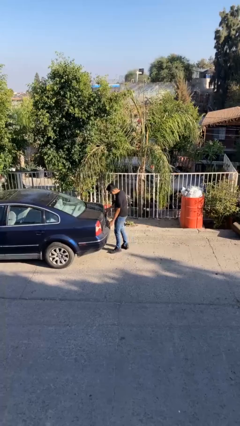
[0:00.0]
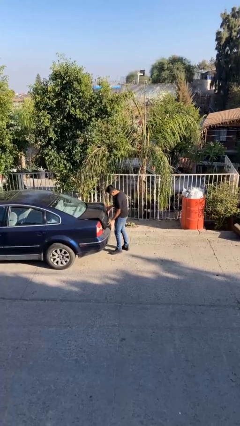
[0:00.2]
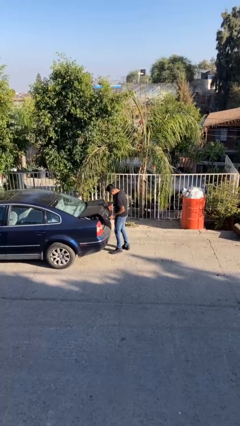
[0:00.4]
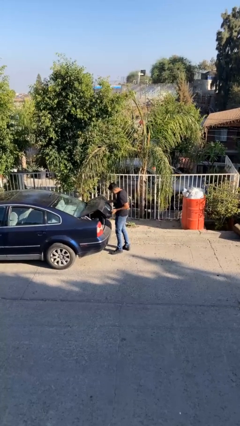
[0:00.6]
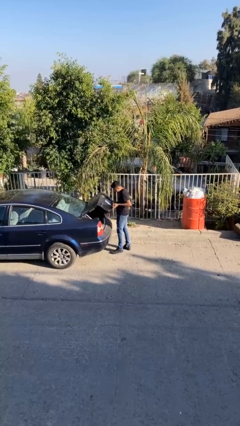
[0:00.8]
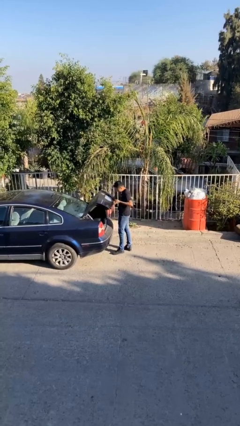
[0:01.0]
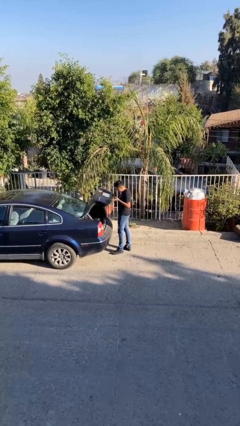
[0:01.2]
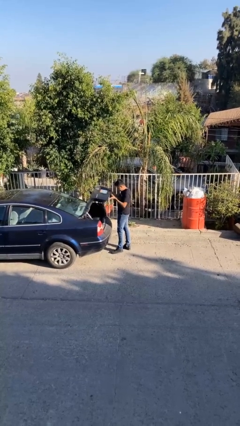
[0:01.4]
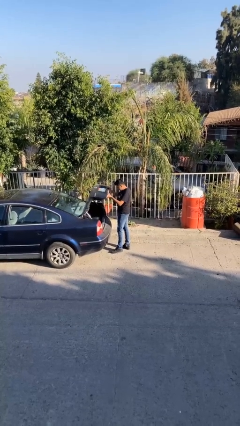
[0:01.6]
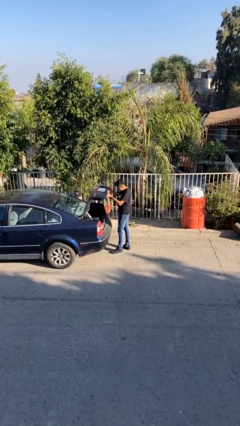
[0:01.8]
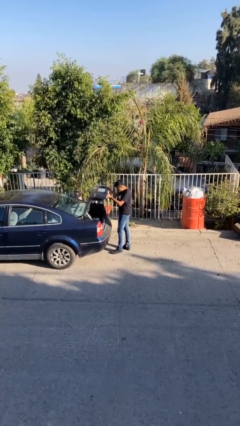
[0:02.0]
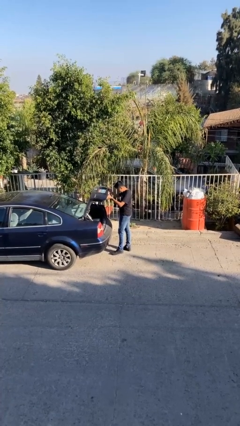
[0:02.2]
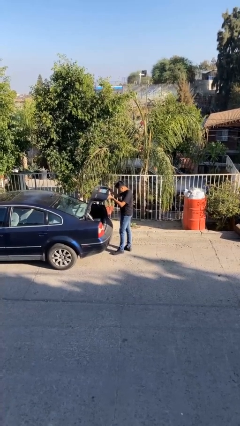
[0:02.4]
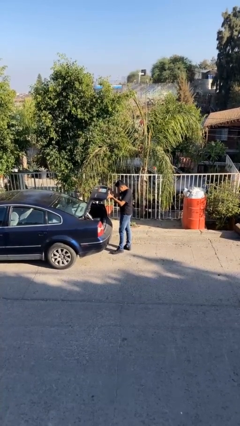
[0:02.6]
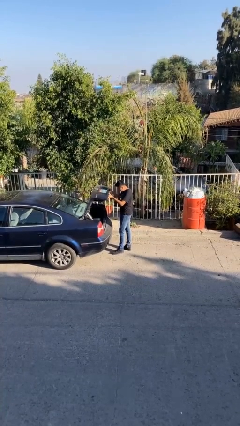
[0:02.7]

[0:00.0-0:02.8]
person opens car trunk

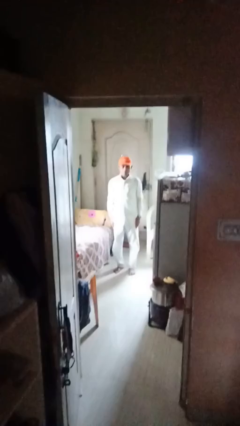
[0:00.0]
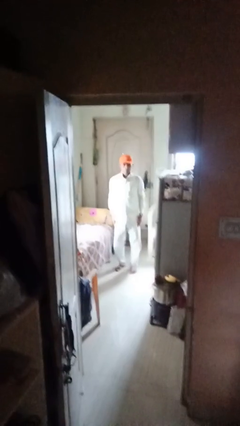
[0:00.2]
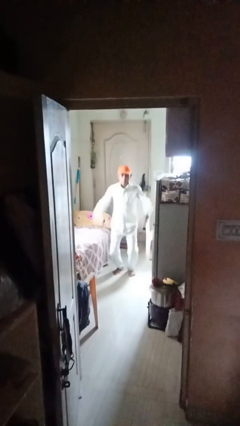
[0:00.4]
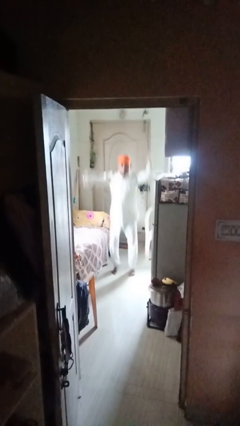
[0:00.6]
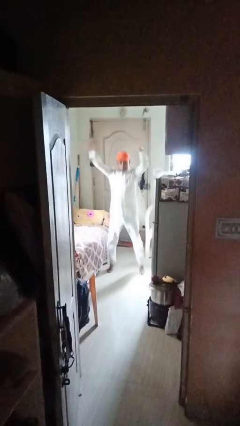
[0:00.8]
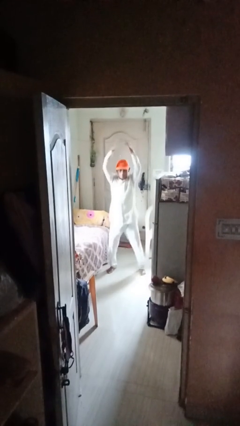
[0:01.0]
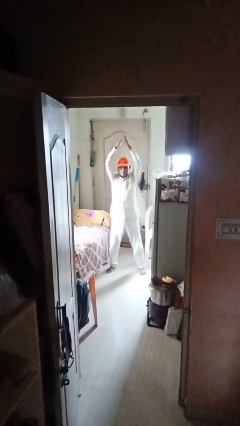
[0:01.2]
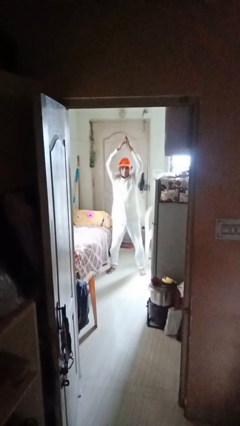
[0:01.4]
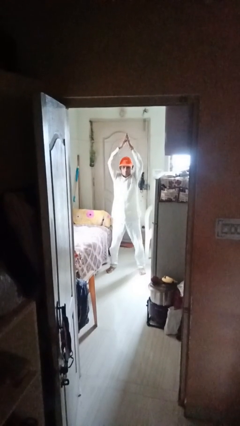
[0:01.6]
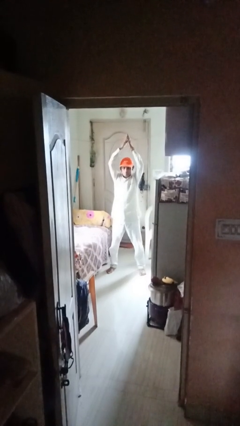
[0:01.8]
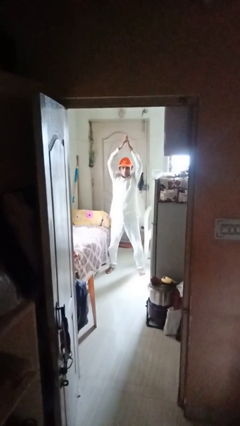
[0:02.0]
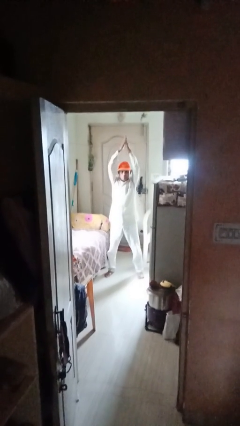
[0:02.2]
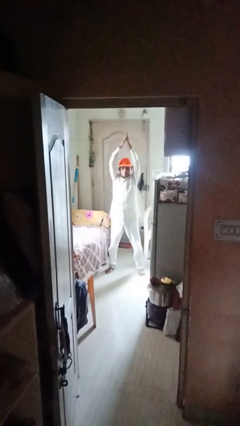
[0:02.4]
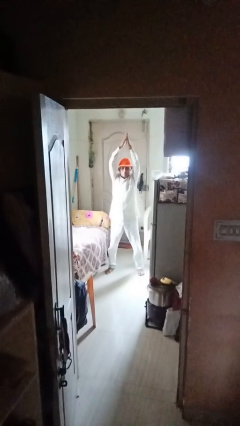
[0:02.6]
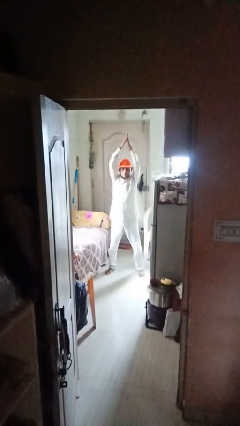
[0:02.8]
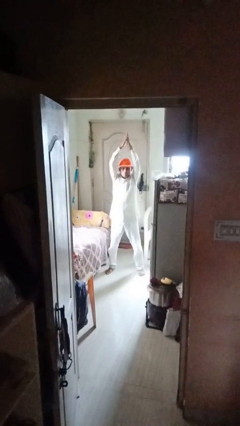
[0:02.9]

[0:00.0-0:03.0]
person exercises with jumping jacks

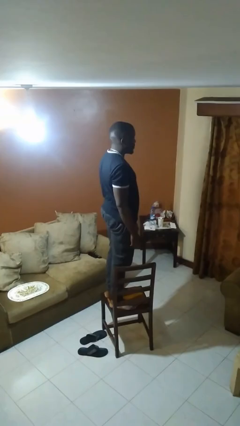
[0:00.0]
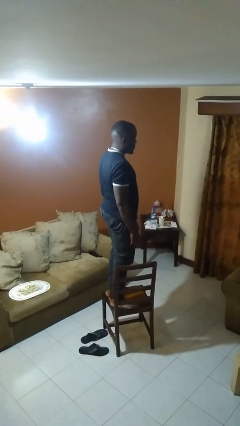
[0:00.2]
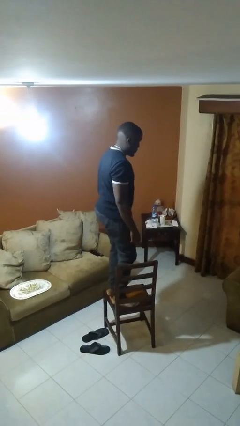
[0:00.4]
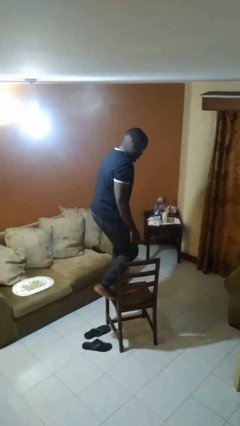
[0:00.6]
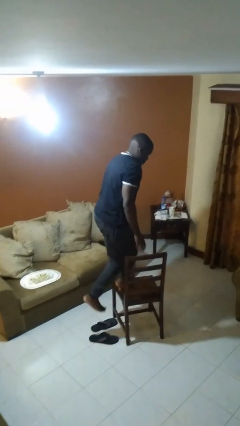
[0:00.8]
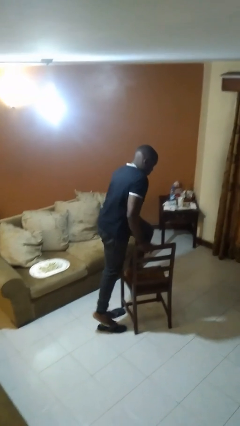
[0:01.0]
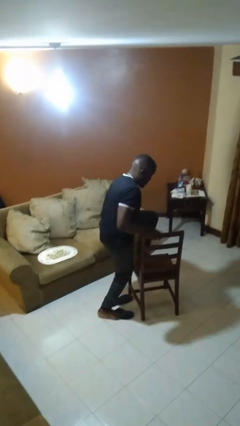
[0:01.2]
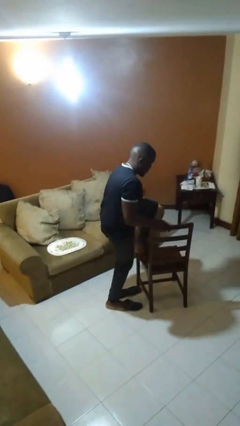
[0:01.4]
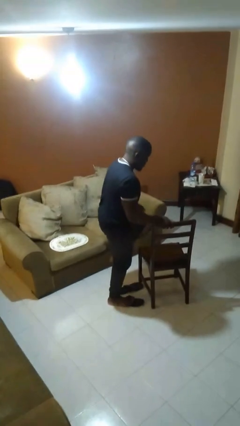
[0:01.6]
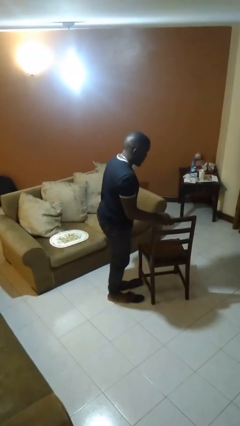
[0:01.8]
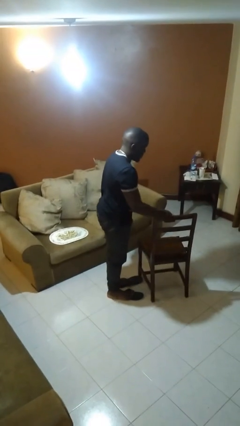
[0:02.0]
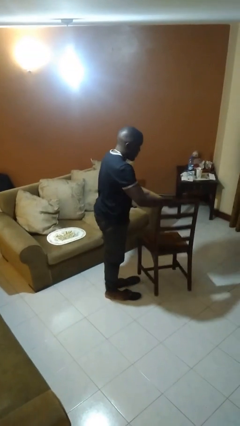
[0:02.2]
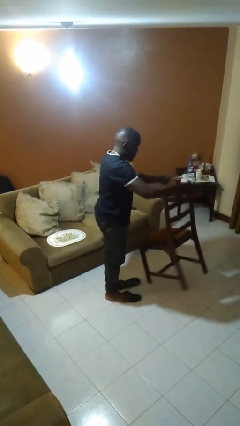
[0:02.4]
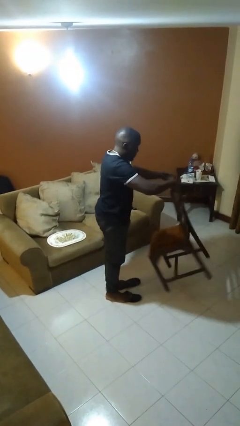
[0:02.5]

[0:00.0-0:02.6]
person climbs off chair

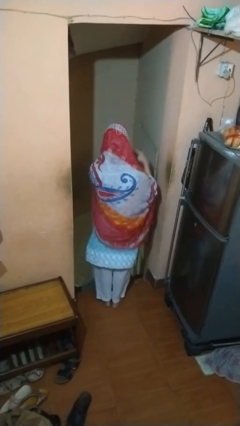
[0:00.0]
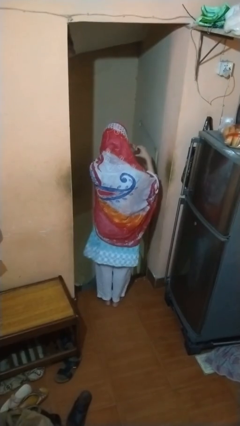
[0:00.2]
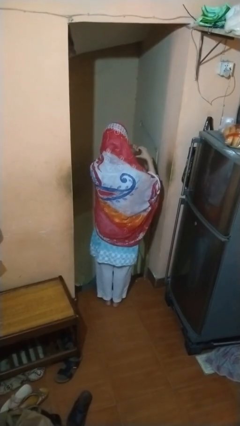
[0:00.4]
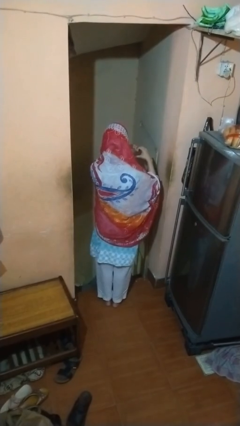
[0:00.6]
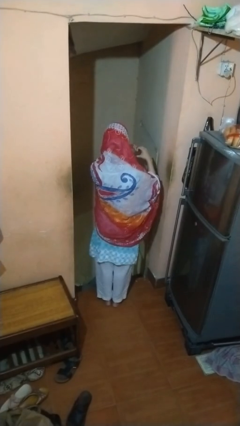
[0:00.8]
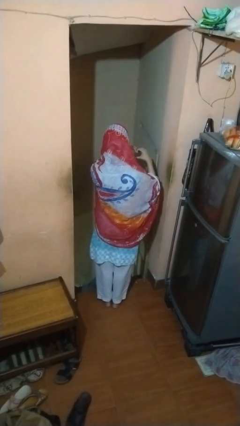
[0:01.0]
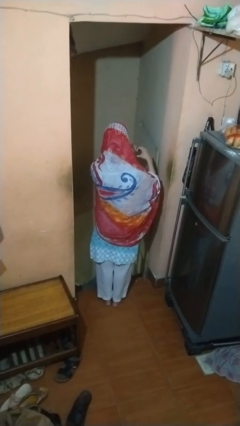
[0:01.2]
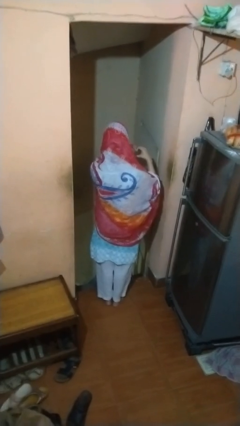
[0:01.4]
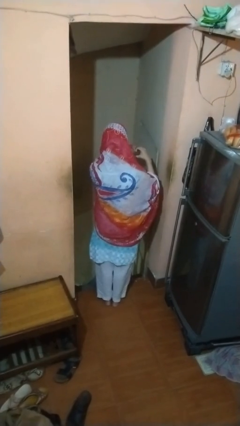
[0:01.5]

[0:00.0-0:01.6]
person gestures heart

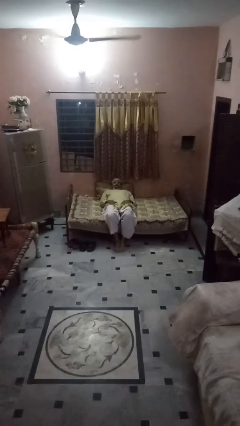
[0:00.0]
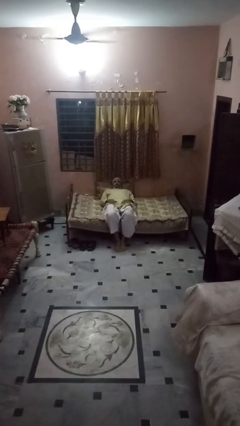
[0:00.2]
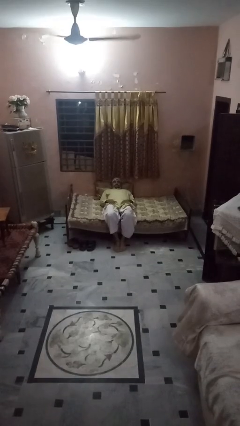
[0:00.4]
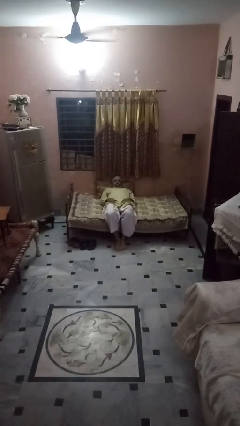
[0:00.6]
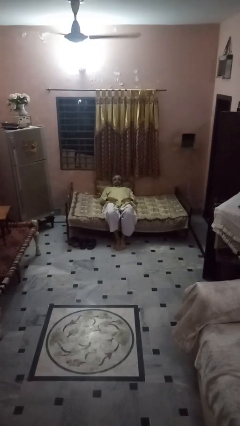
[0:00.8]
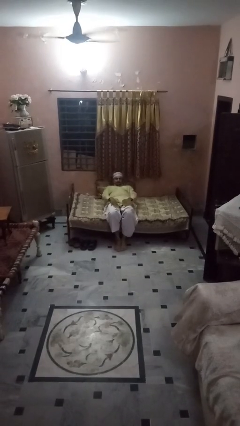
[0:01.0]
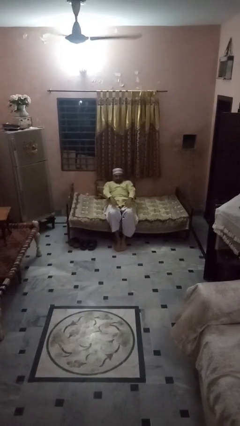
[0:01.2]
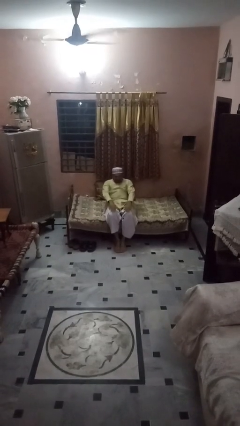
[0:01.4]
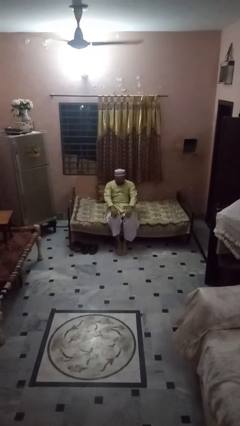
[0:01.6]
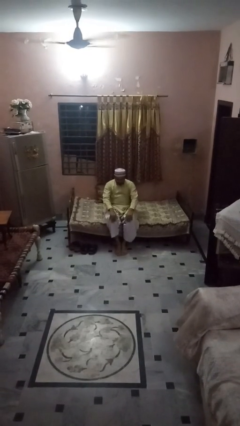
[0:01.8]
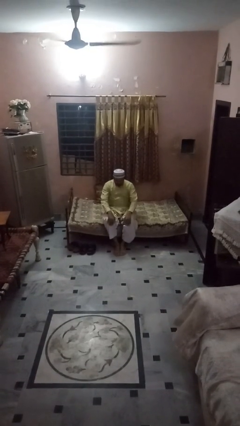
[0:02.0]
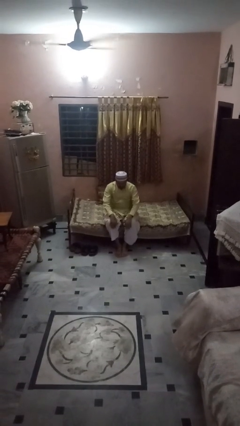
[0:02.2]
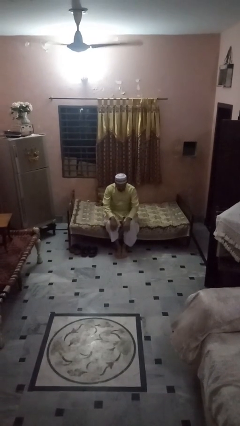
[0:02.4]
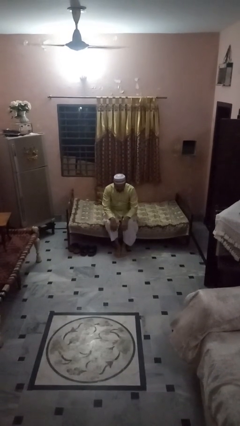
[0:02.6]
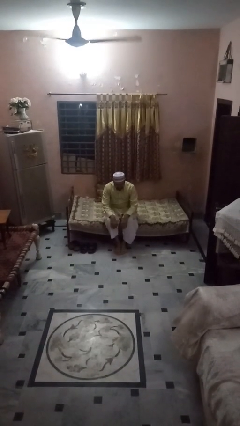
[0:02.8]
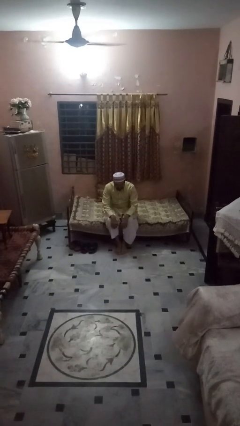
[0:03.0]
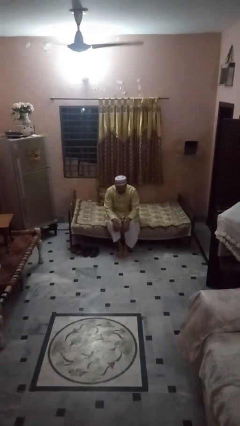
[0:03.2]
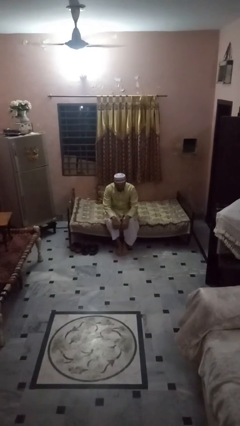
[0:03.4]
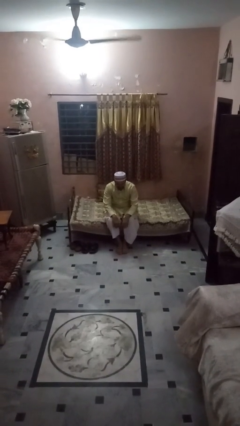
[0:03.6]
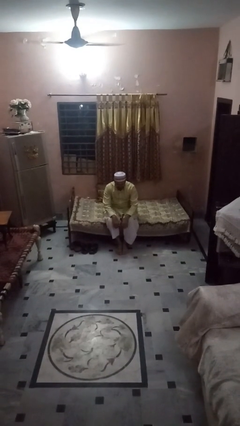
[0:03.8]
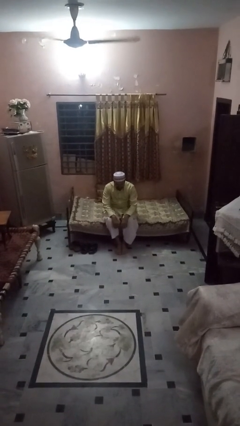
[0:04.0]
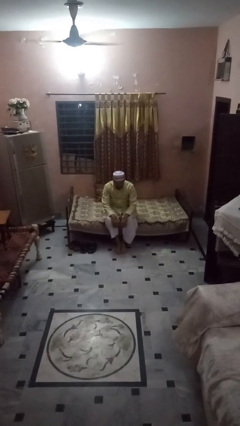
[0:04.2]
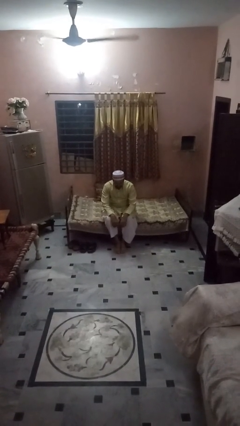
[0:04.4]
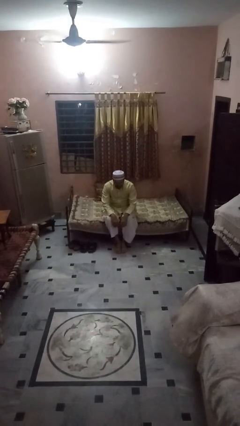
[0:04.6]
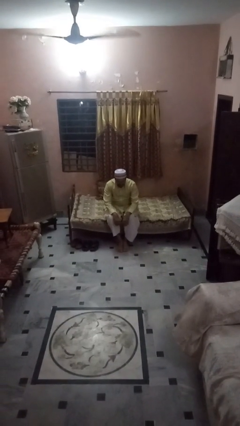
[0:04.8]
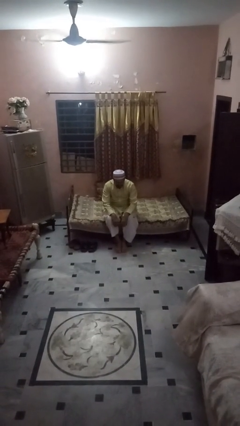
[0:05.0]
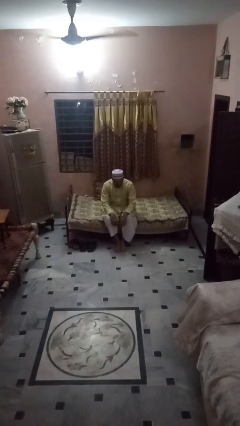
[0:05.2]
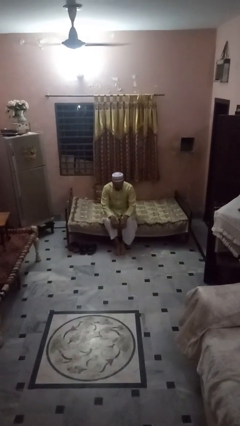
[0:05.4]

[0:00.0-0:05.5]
person stands up

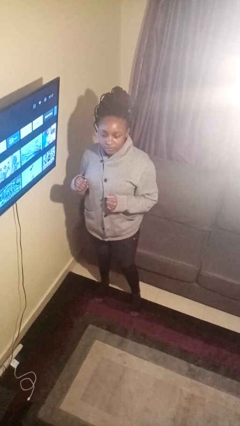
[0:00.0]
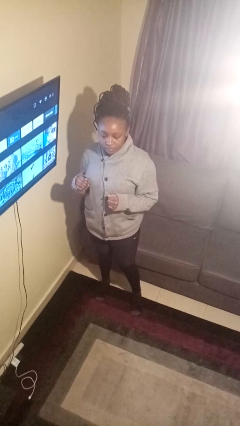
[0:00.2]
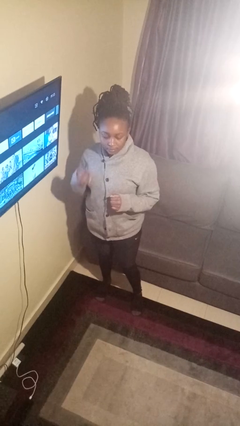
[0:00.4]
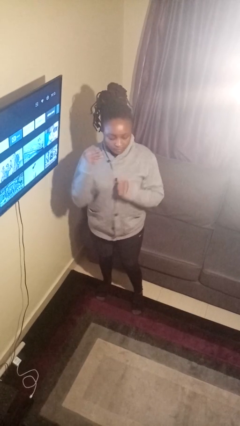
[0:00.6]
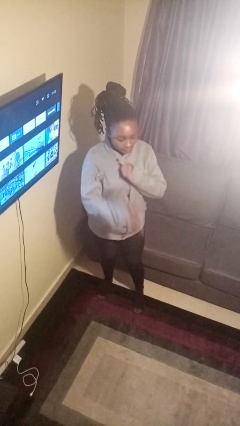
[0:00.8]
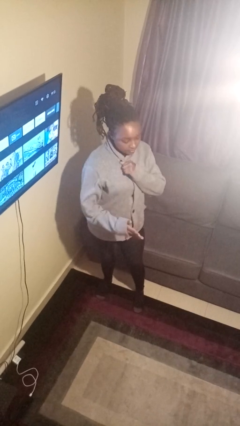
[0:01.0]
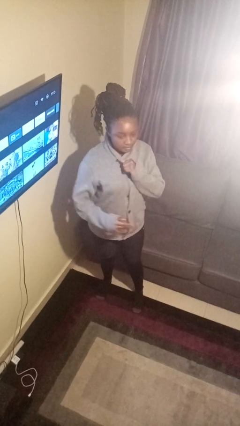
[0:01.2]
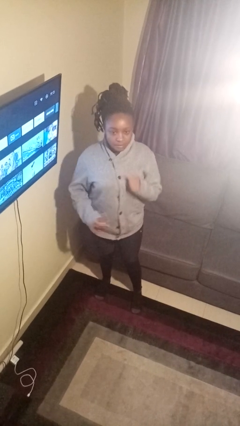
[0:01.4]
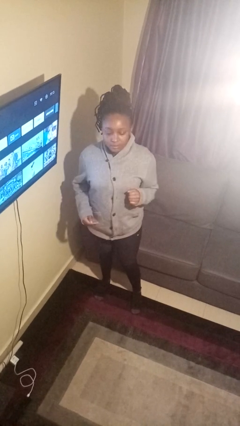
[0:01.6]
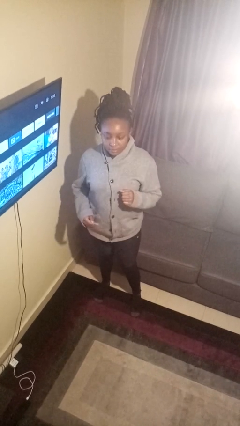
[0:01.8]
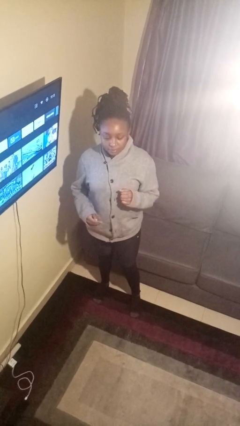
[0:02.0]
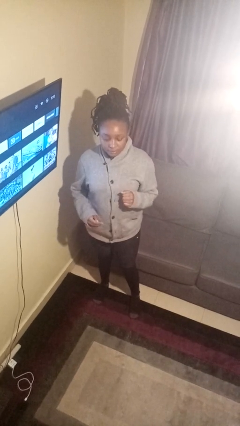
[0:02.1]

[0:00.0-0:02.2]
person karate chop
